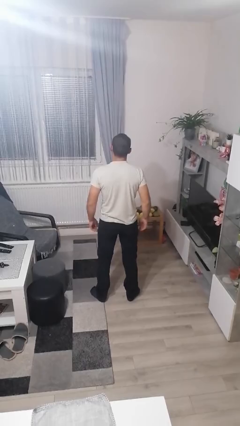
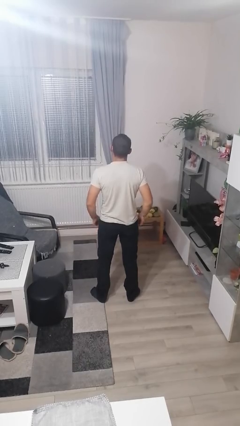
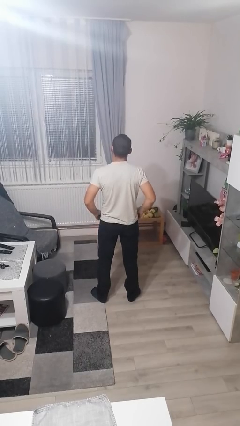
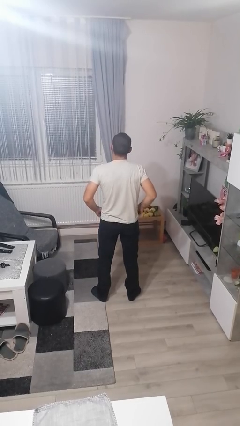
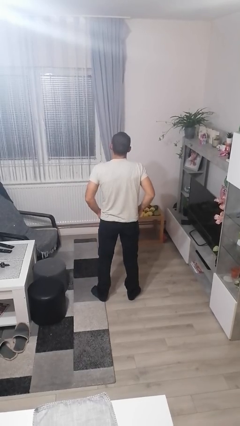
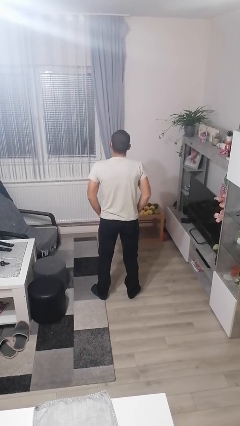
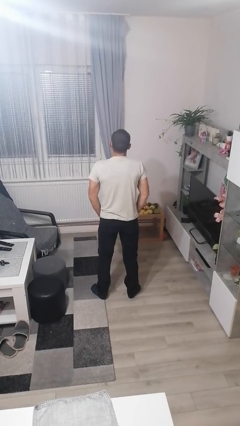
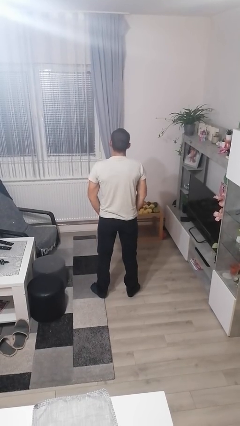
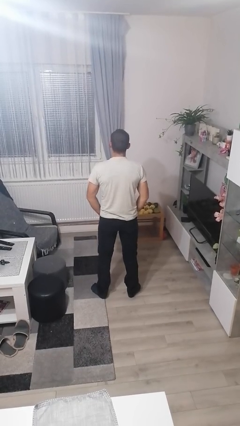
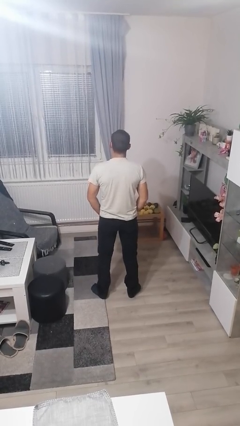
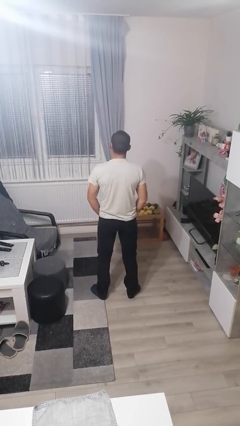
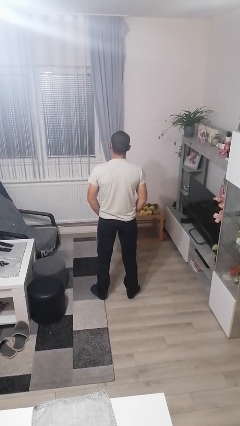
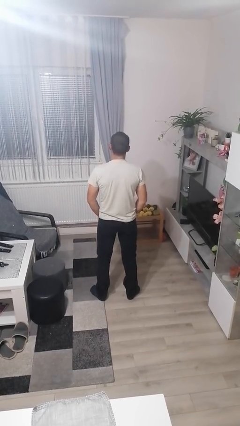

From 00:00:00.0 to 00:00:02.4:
person puts hands in back pockets

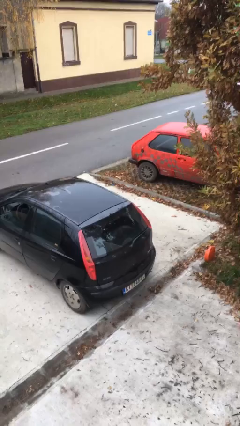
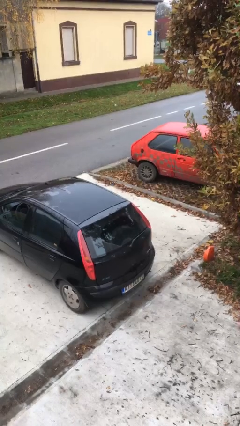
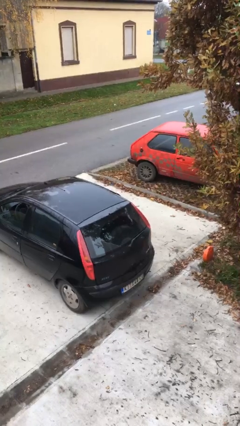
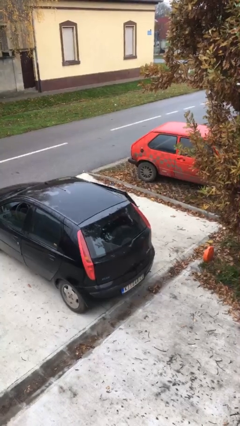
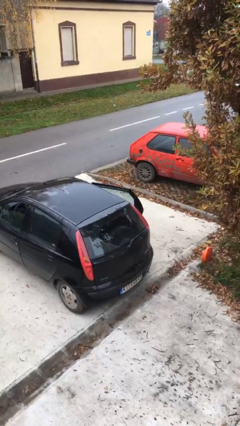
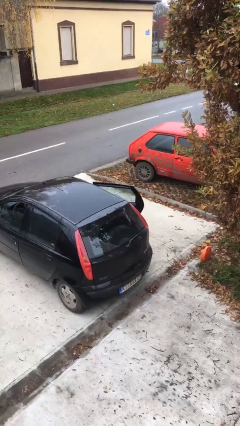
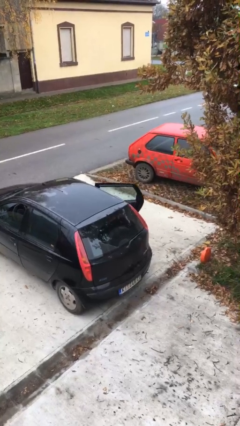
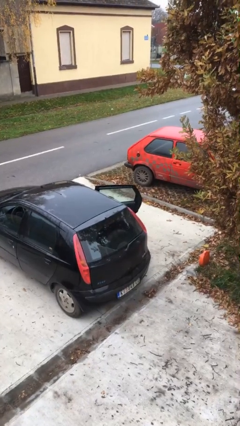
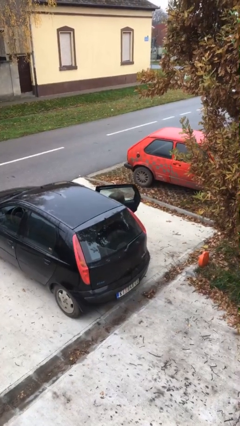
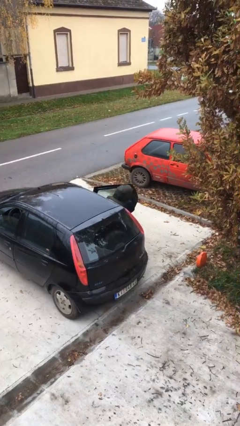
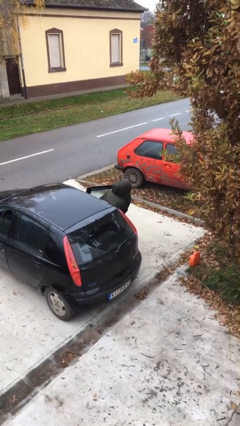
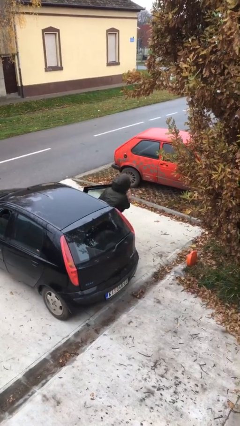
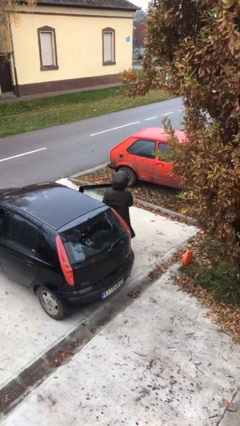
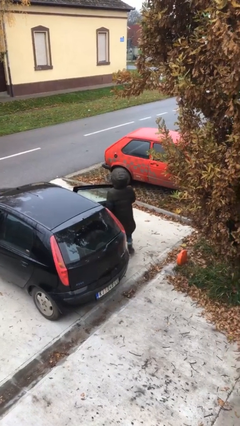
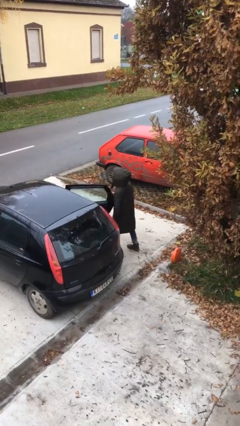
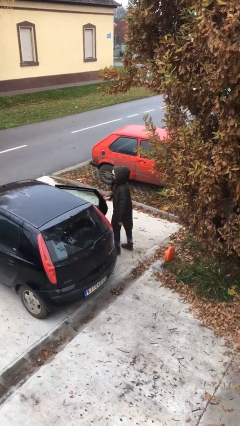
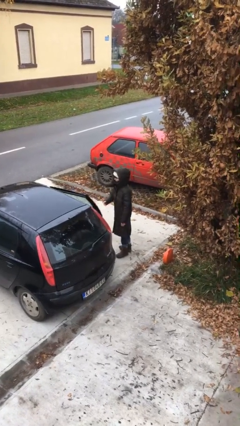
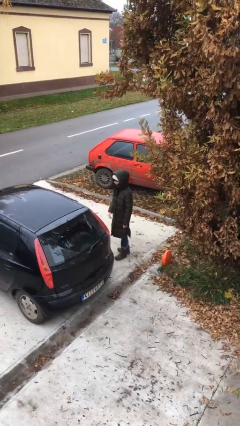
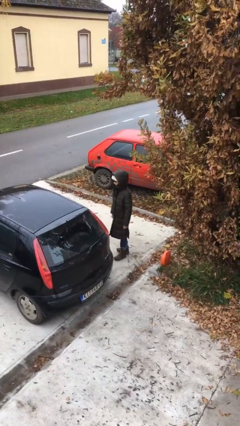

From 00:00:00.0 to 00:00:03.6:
person exits car

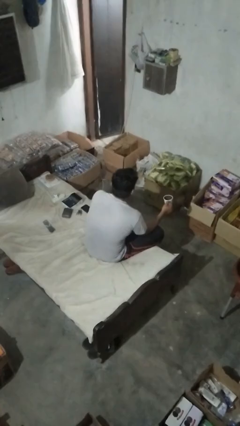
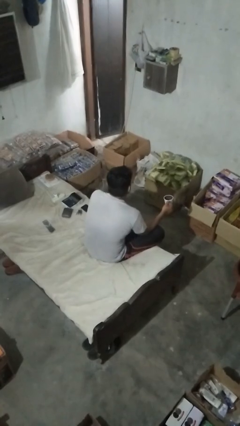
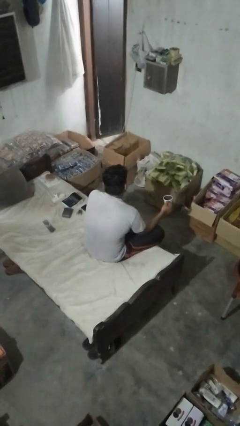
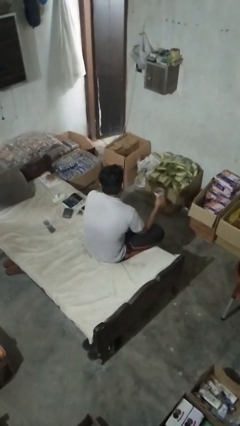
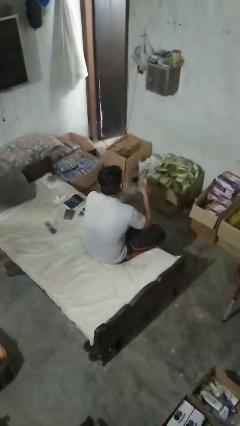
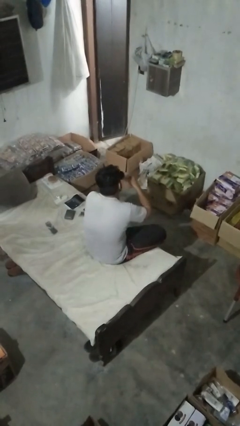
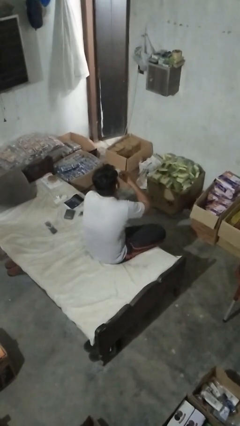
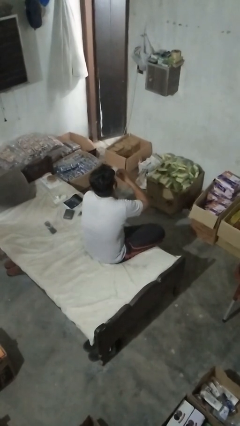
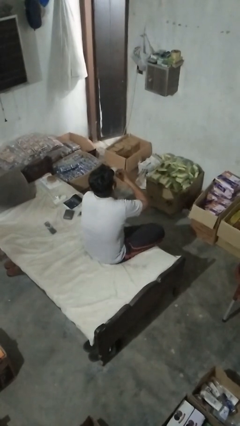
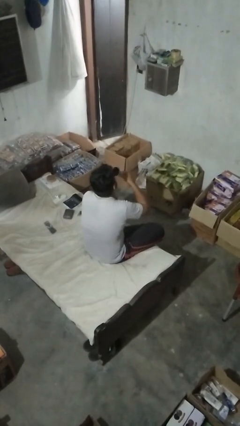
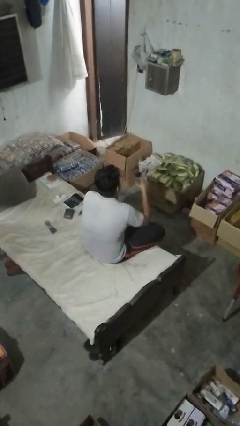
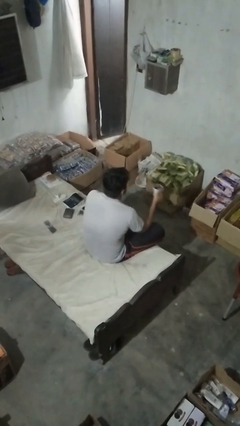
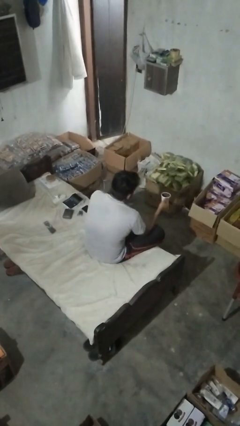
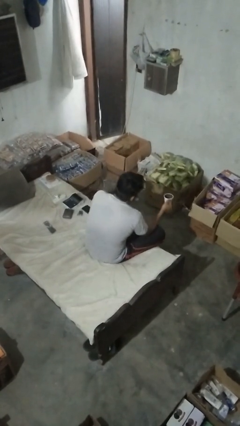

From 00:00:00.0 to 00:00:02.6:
person drinks from mug

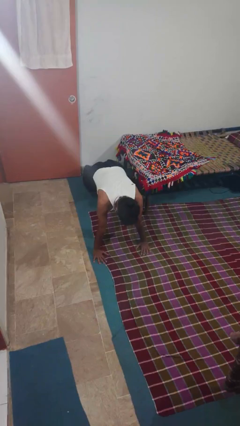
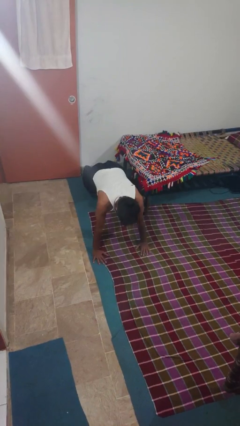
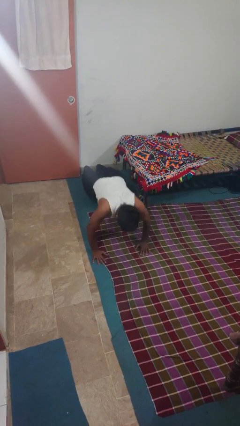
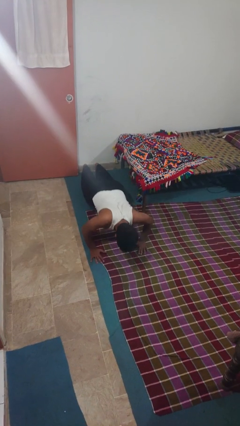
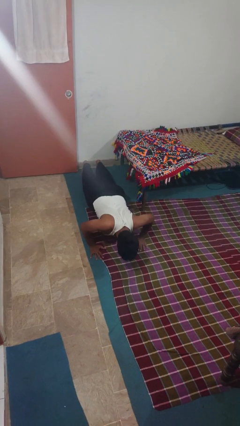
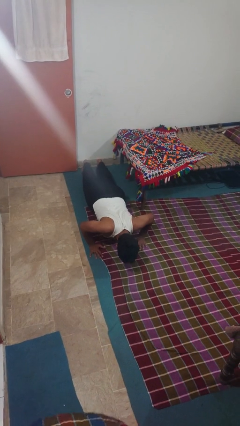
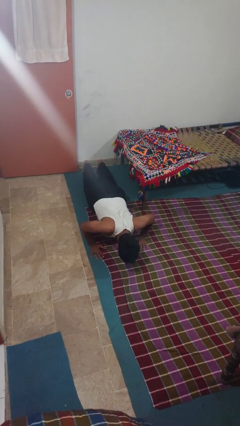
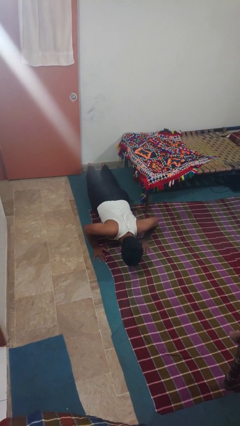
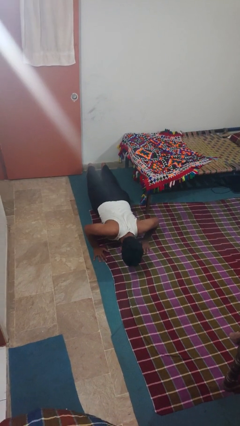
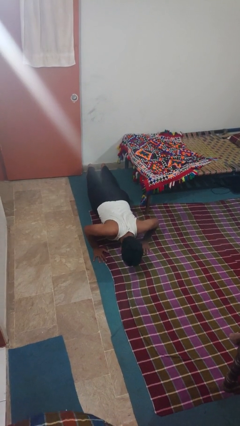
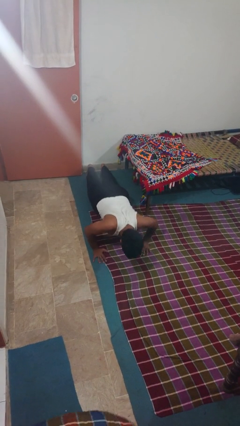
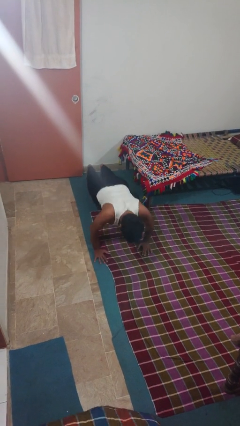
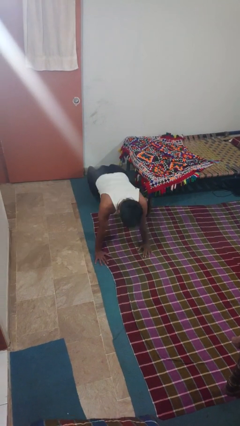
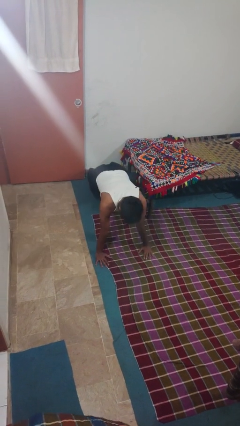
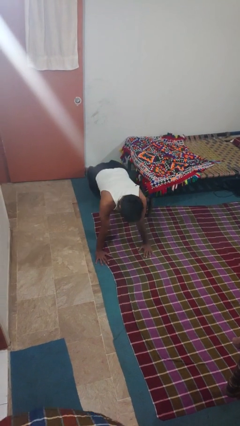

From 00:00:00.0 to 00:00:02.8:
person exercises with pushup

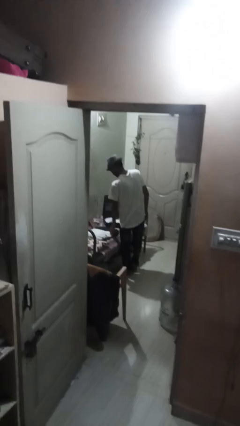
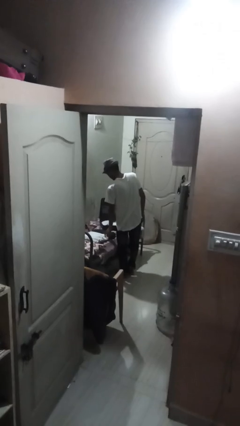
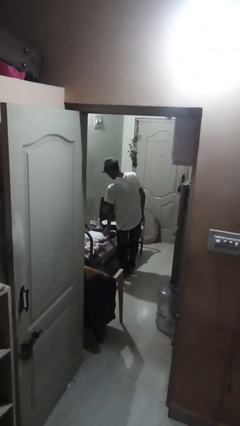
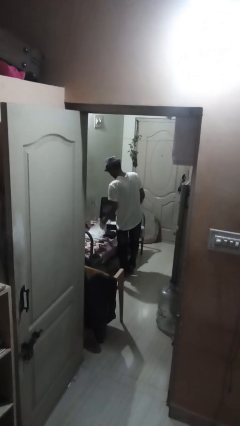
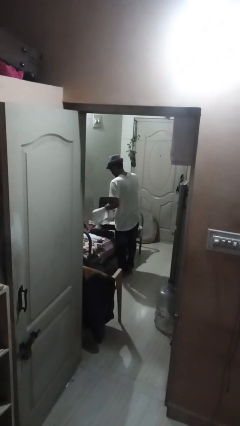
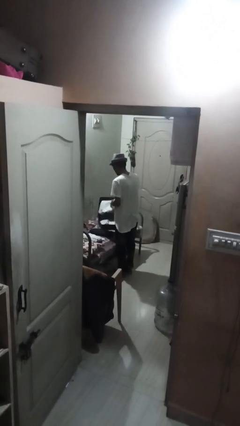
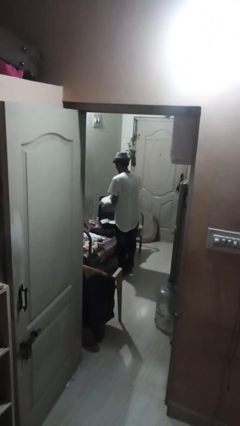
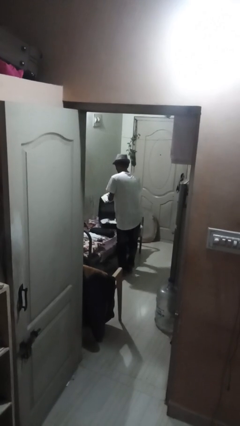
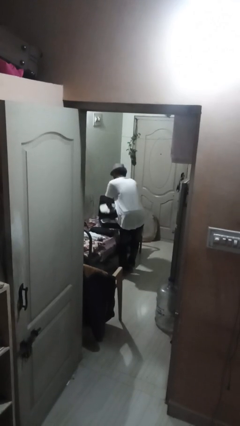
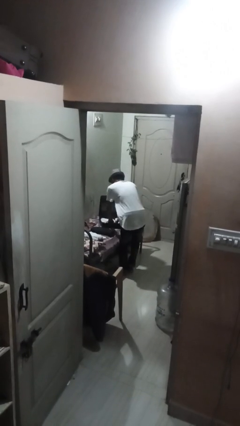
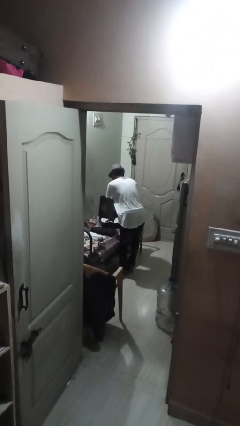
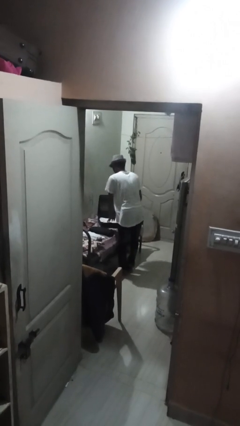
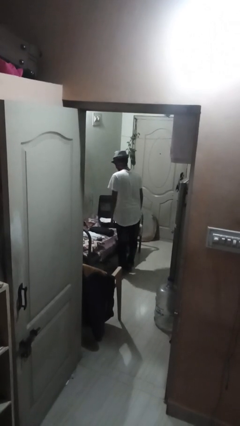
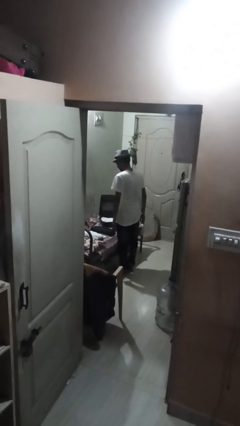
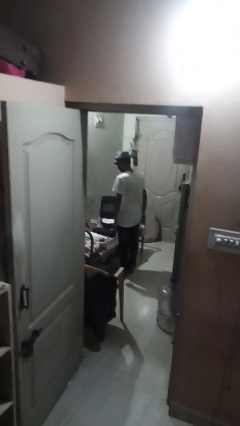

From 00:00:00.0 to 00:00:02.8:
person loads clothes into suitcase

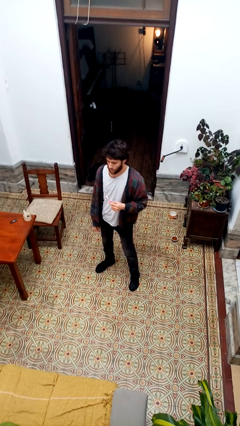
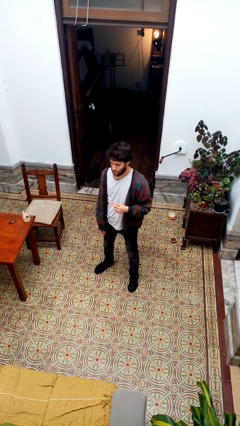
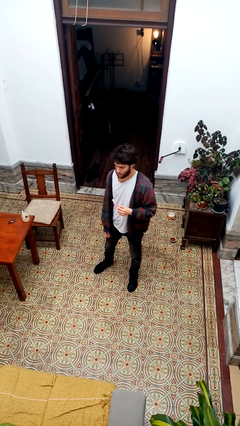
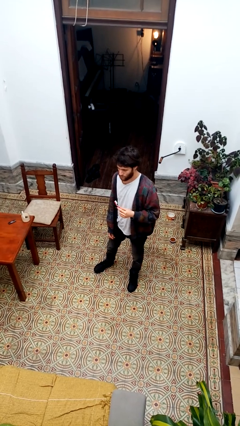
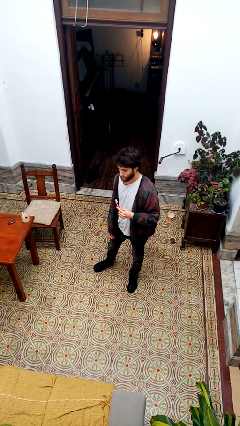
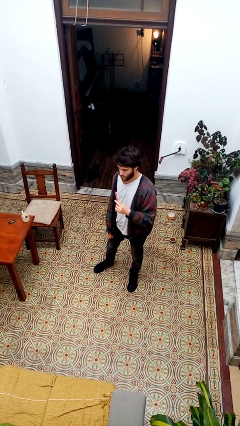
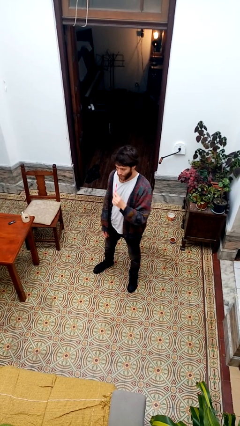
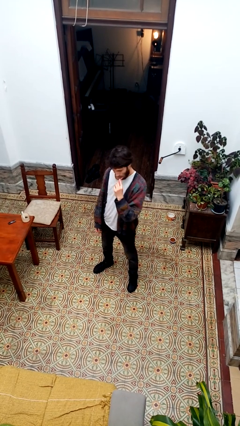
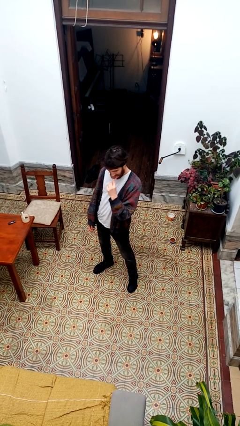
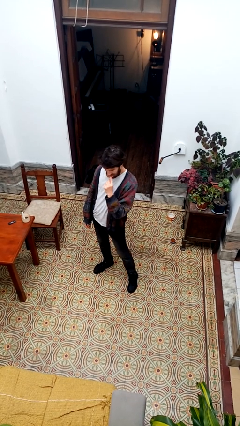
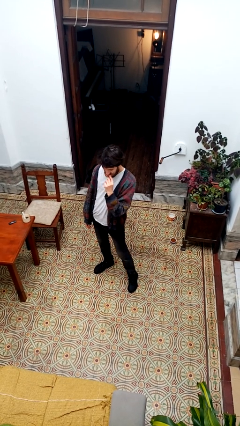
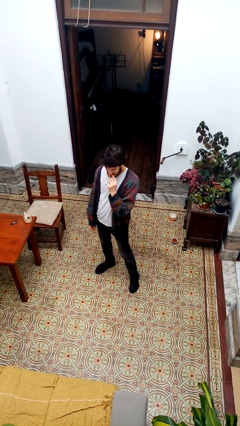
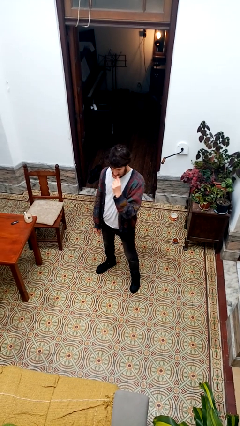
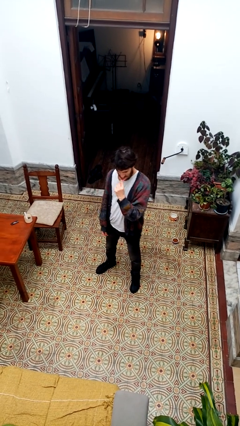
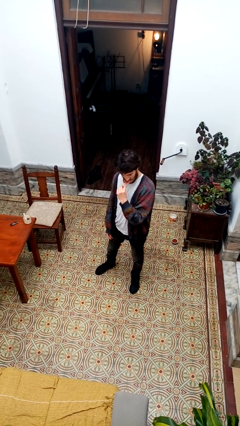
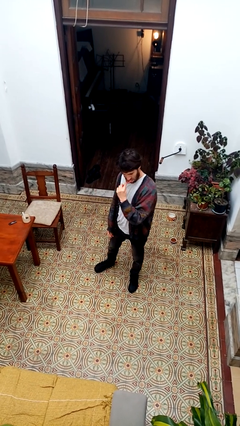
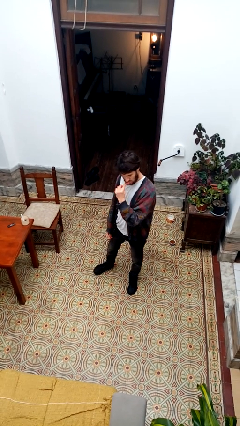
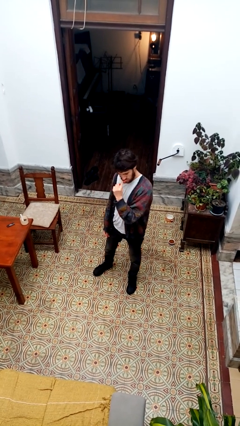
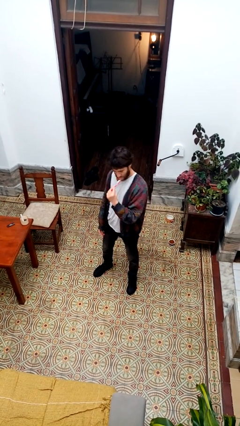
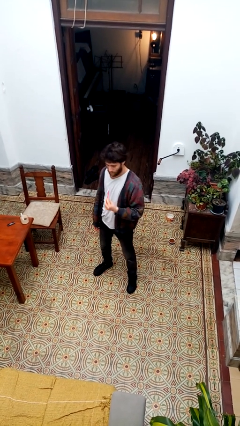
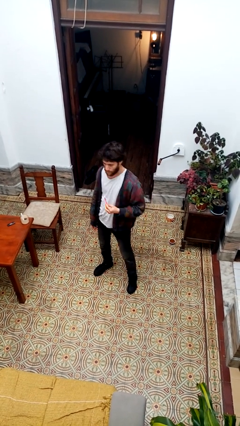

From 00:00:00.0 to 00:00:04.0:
person brushes teeth
